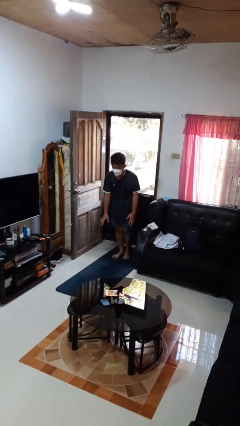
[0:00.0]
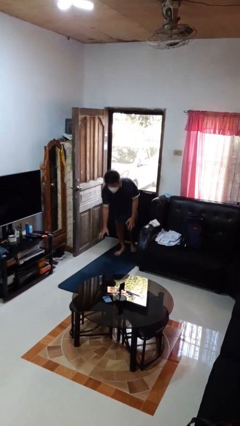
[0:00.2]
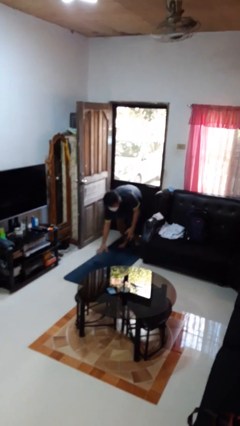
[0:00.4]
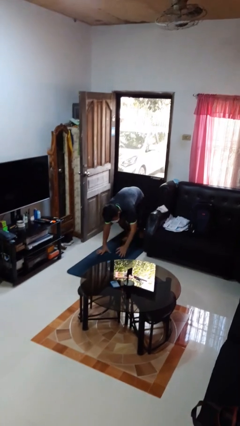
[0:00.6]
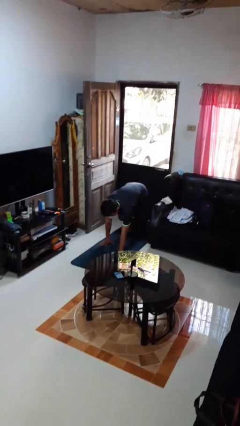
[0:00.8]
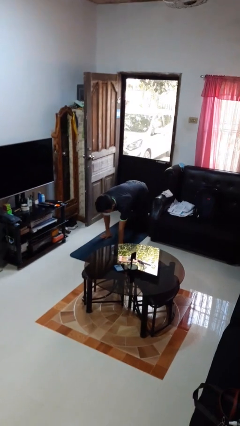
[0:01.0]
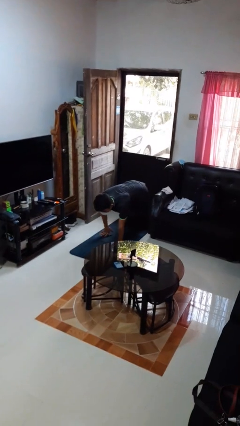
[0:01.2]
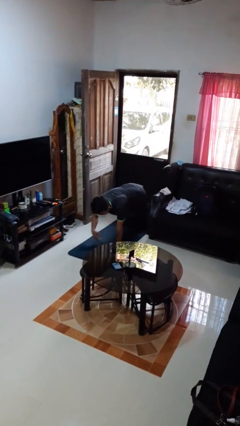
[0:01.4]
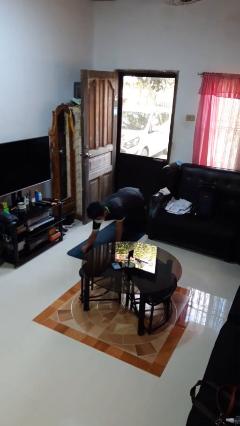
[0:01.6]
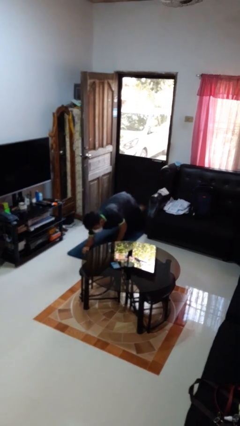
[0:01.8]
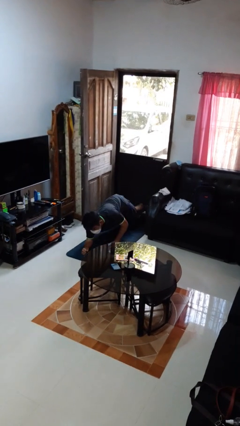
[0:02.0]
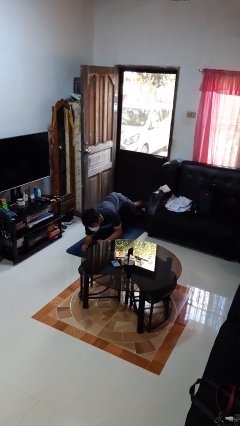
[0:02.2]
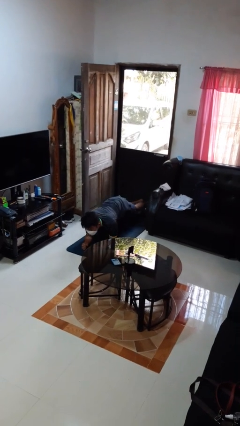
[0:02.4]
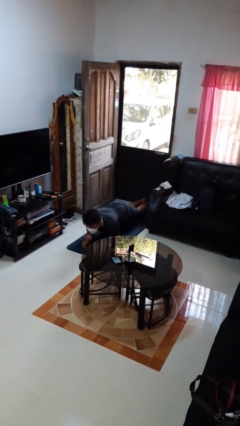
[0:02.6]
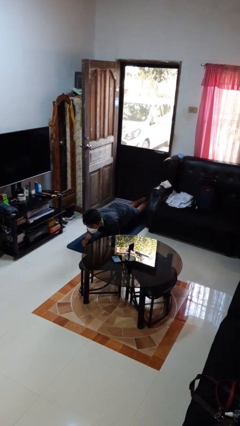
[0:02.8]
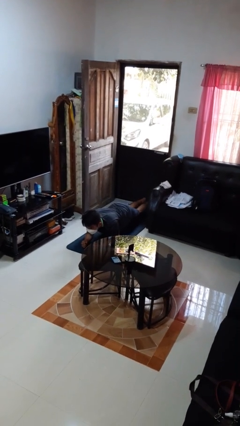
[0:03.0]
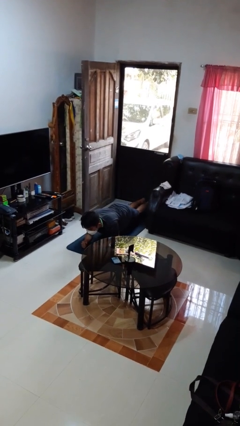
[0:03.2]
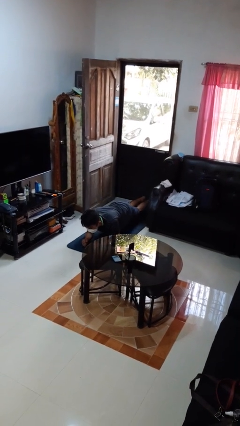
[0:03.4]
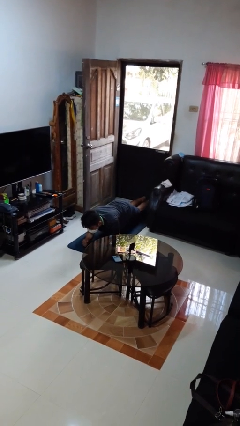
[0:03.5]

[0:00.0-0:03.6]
person exercises with plank

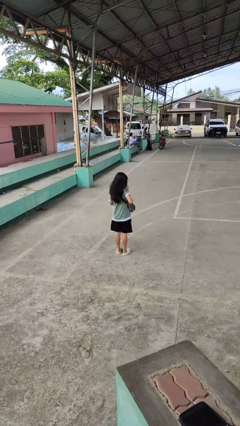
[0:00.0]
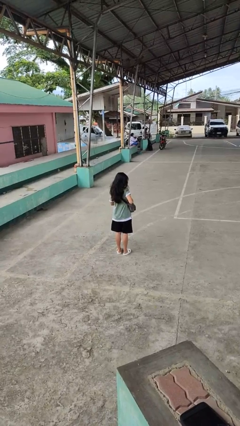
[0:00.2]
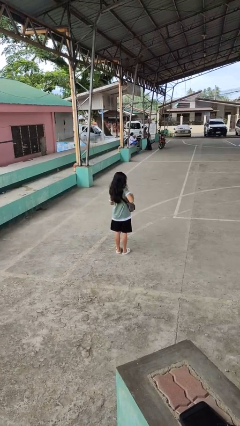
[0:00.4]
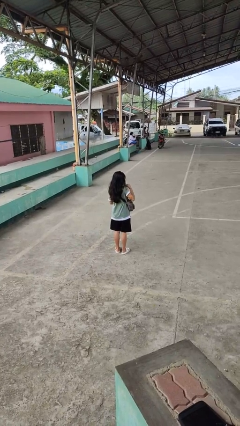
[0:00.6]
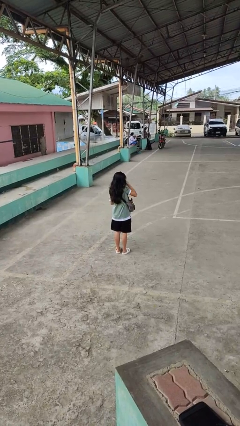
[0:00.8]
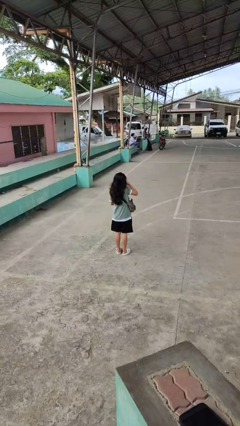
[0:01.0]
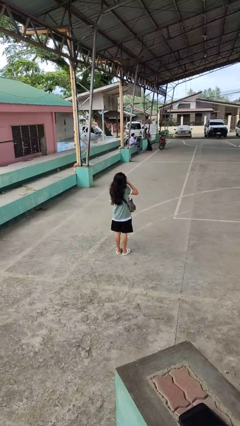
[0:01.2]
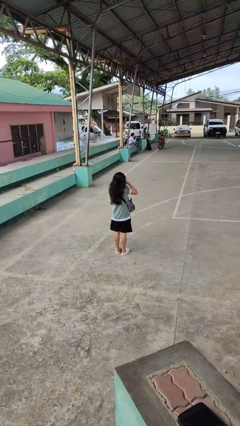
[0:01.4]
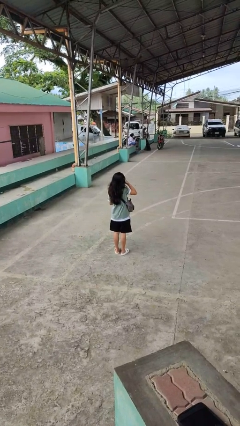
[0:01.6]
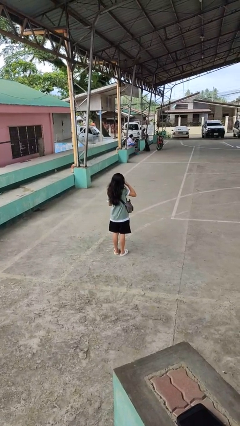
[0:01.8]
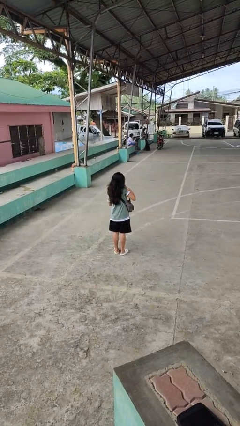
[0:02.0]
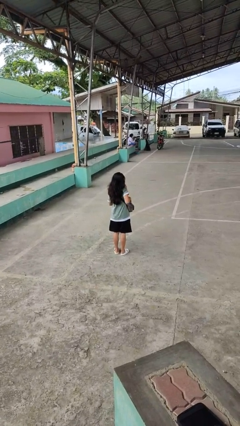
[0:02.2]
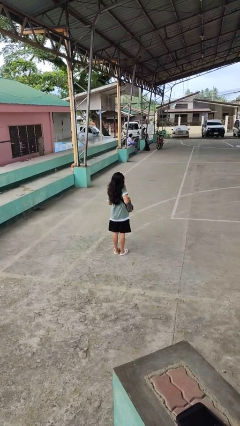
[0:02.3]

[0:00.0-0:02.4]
person eats snack from bag

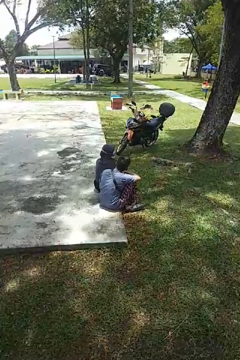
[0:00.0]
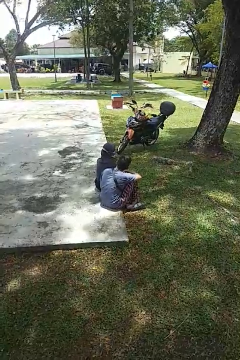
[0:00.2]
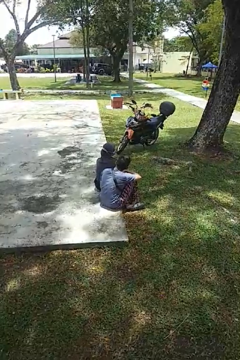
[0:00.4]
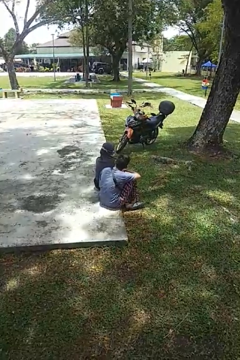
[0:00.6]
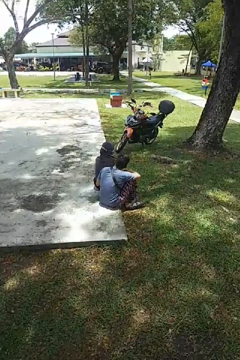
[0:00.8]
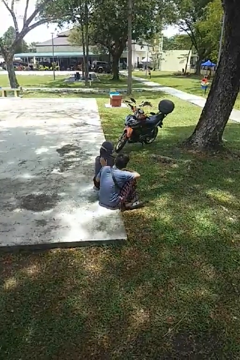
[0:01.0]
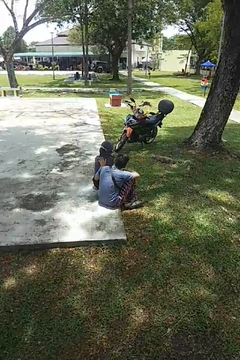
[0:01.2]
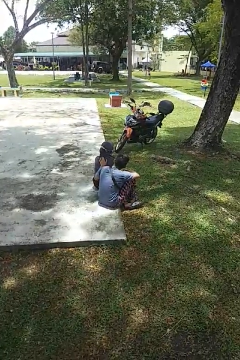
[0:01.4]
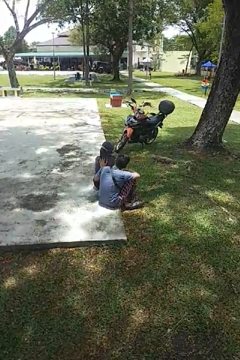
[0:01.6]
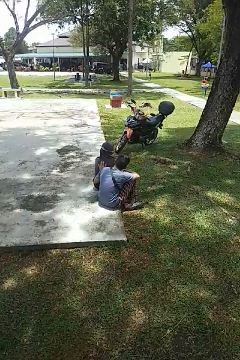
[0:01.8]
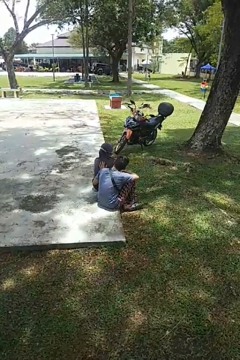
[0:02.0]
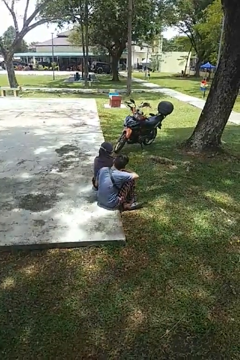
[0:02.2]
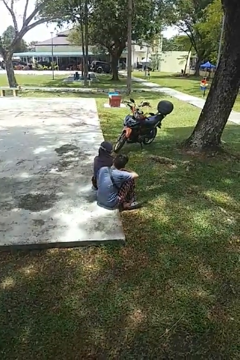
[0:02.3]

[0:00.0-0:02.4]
person touches back of person

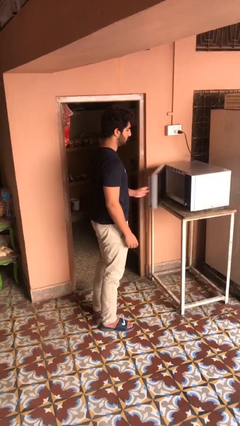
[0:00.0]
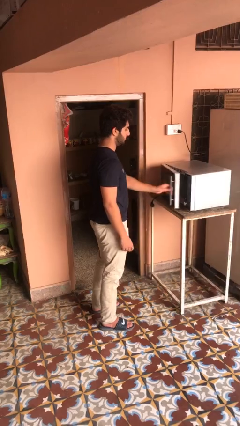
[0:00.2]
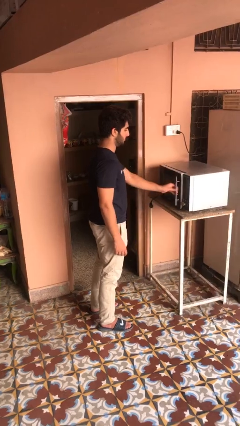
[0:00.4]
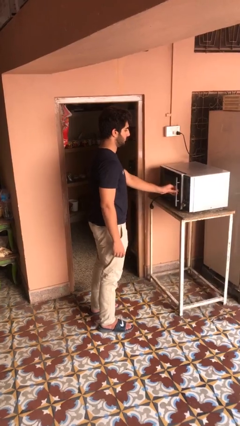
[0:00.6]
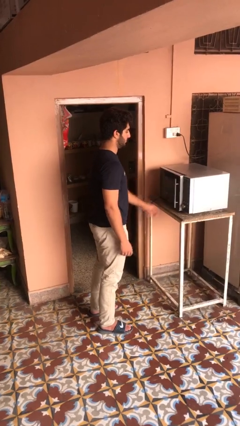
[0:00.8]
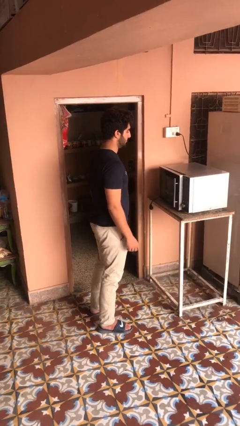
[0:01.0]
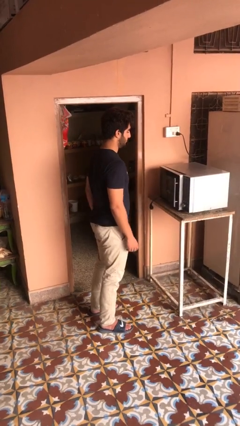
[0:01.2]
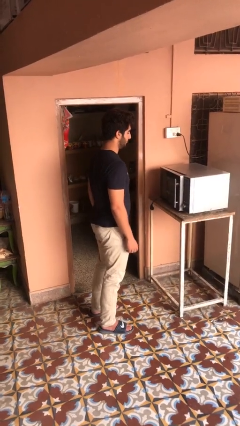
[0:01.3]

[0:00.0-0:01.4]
person closes microwave

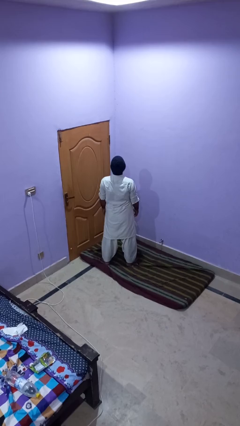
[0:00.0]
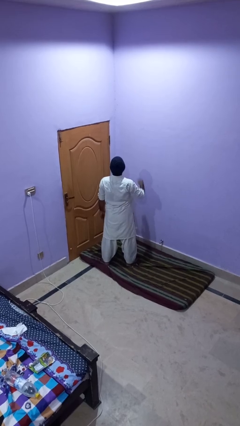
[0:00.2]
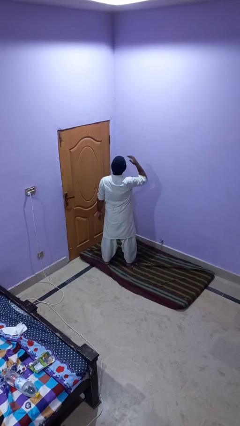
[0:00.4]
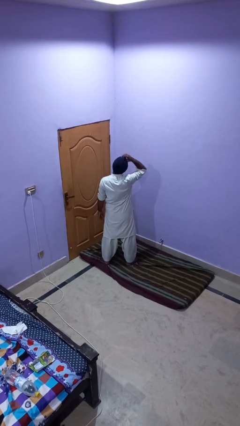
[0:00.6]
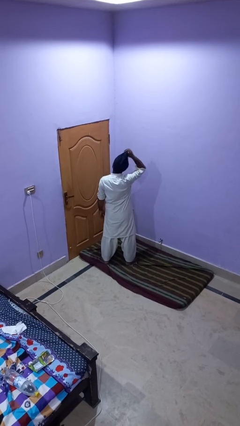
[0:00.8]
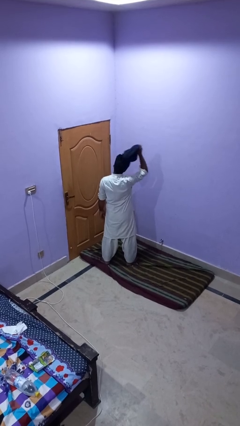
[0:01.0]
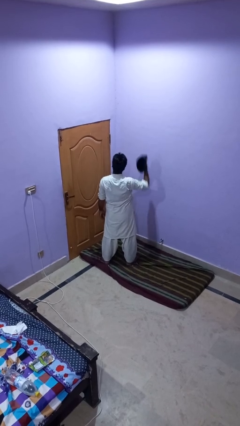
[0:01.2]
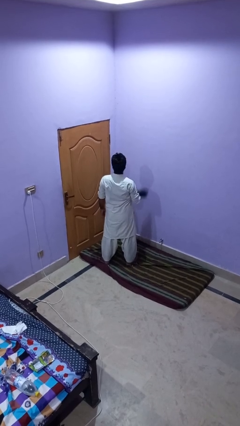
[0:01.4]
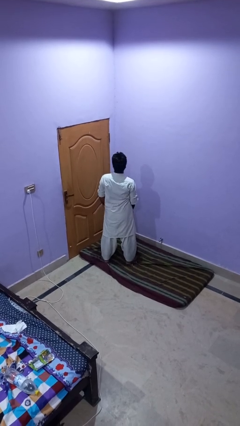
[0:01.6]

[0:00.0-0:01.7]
person takes off hat

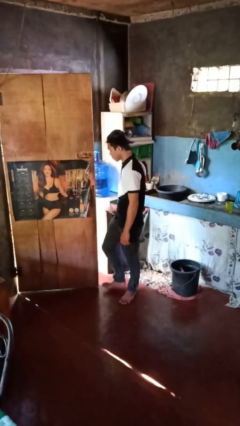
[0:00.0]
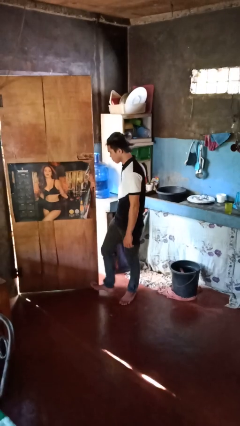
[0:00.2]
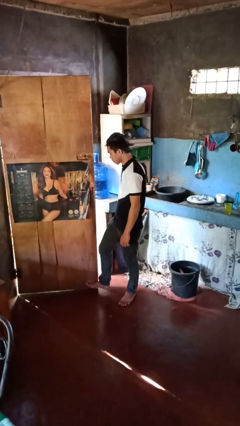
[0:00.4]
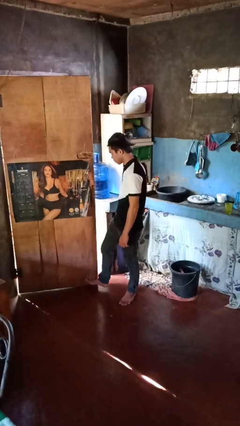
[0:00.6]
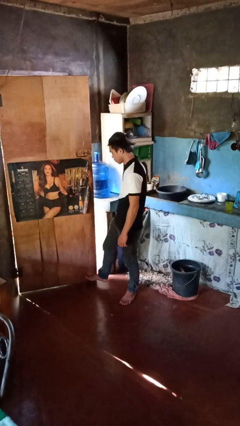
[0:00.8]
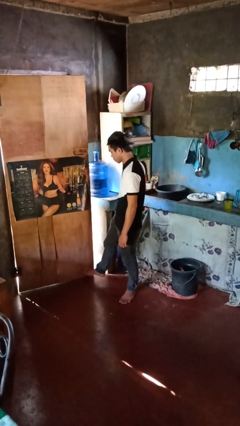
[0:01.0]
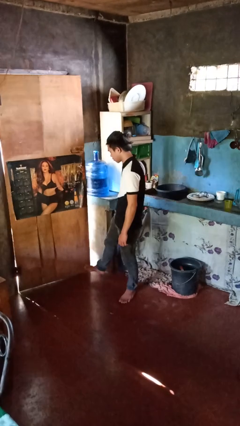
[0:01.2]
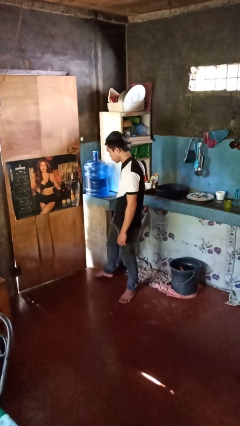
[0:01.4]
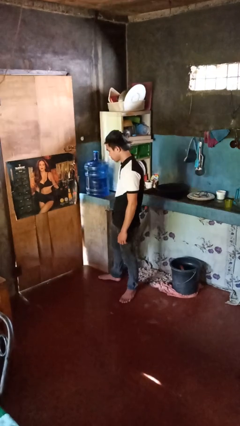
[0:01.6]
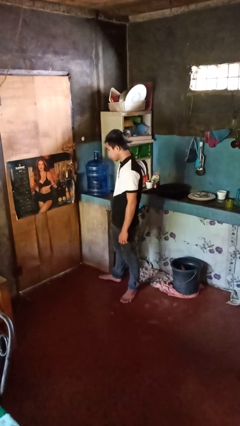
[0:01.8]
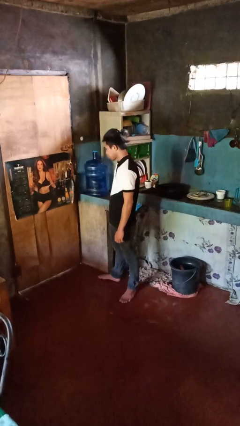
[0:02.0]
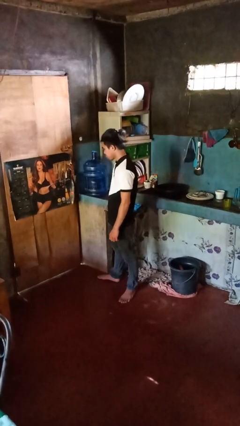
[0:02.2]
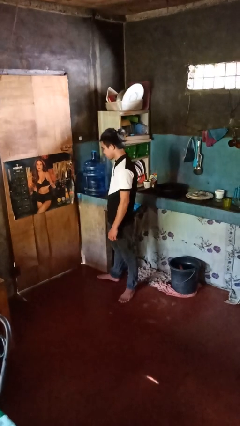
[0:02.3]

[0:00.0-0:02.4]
person closes door with foot

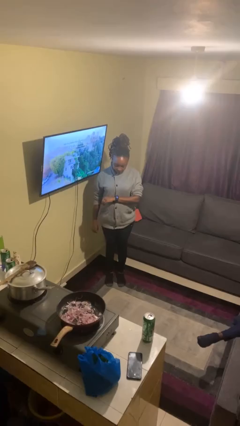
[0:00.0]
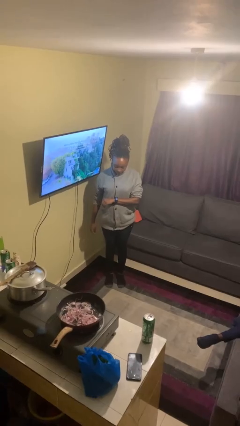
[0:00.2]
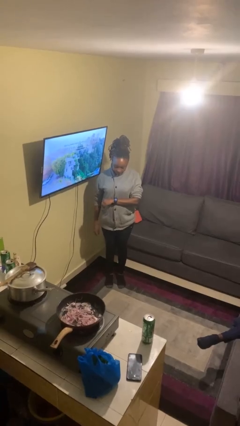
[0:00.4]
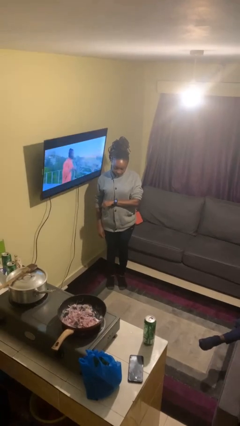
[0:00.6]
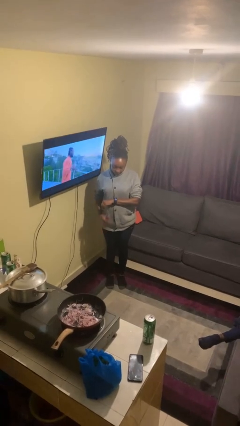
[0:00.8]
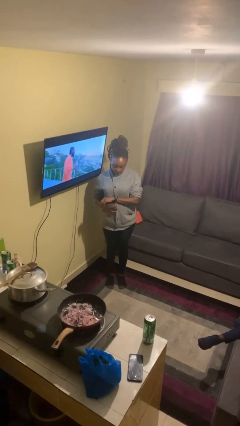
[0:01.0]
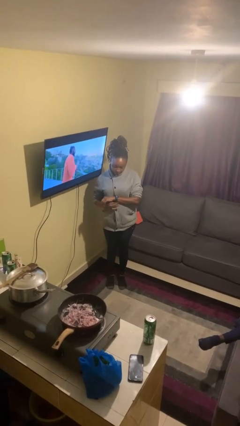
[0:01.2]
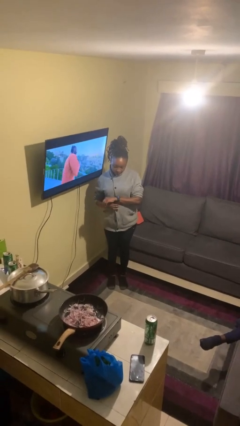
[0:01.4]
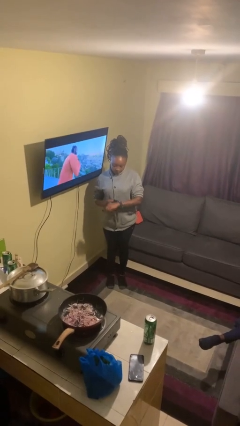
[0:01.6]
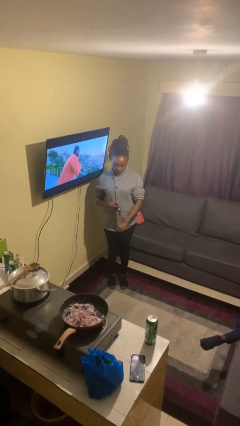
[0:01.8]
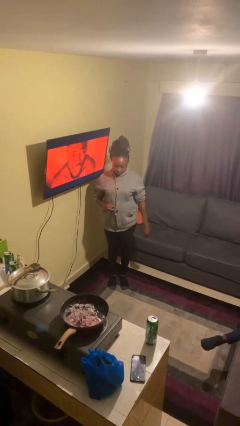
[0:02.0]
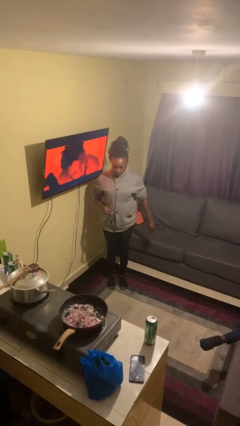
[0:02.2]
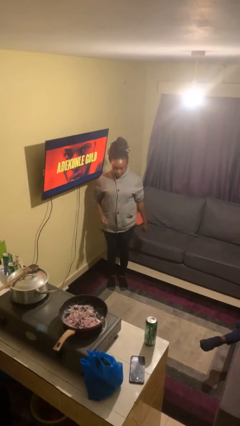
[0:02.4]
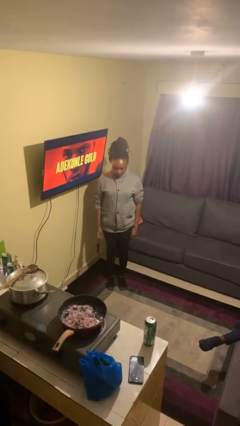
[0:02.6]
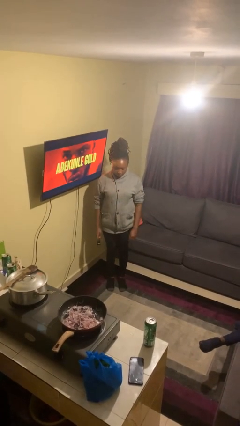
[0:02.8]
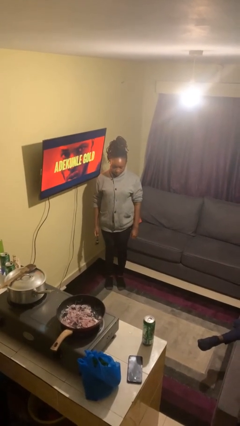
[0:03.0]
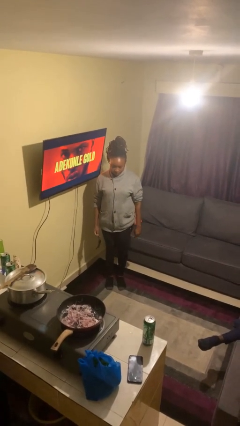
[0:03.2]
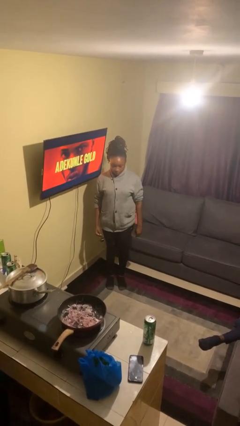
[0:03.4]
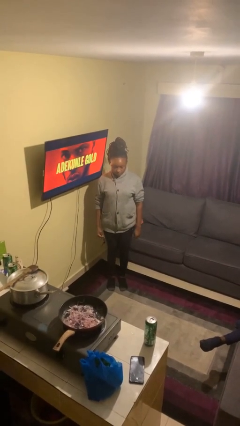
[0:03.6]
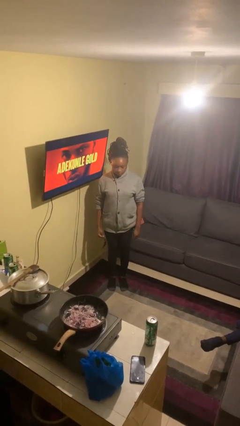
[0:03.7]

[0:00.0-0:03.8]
person takes off wristwatch
